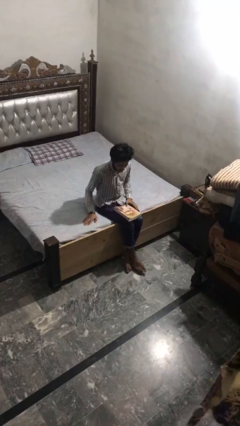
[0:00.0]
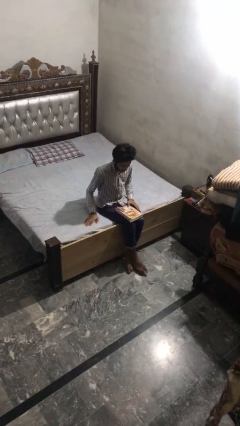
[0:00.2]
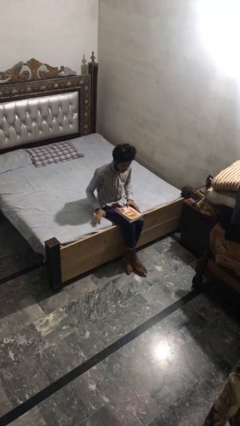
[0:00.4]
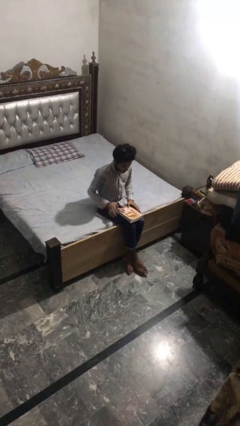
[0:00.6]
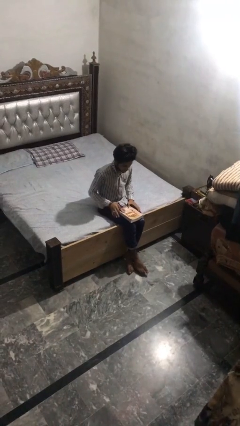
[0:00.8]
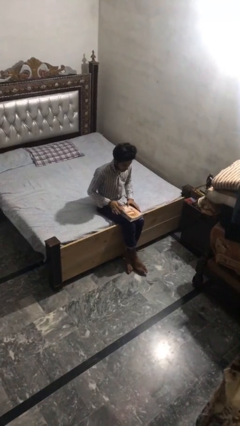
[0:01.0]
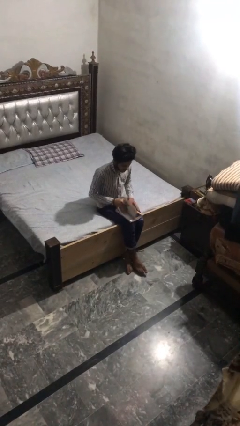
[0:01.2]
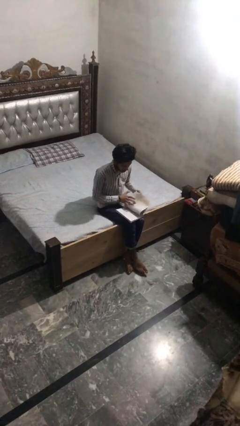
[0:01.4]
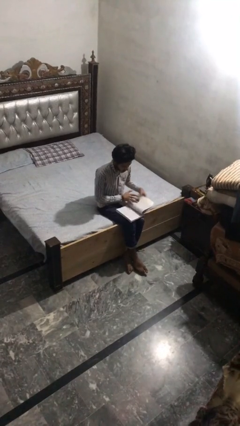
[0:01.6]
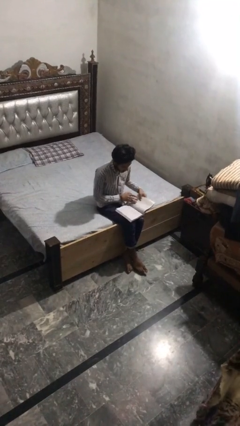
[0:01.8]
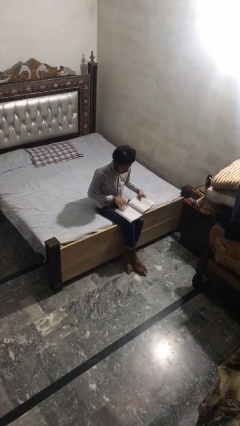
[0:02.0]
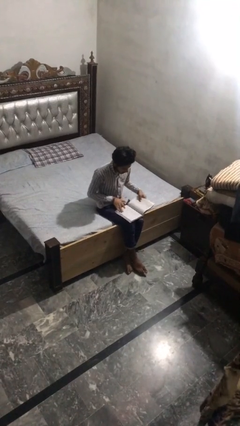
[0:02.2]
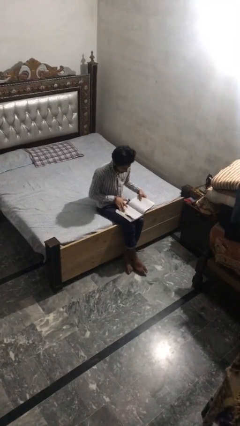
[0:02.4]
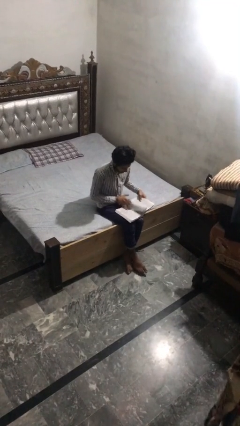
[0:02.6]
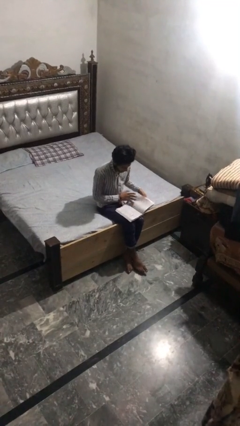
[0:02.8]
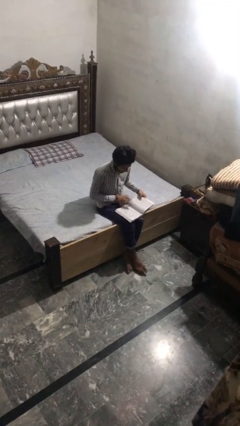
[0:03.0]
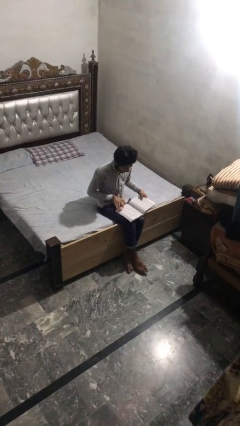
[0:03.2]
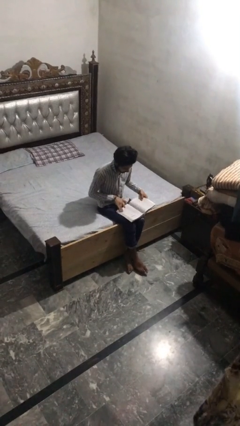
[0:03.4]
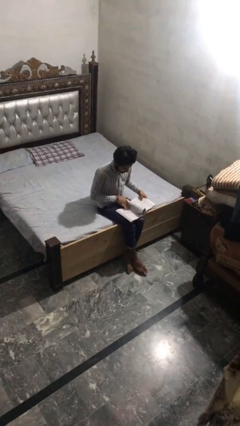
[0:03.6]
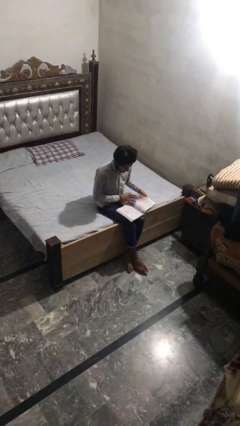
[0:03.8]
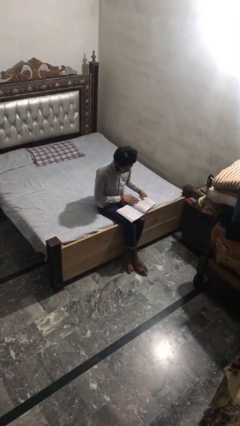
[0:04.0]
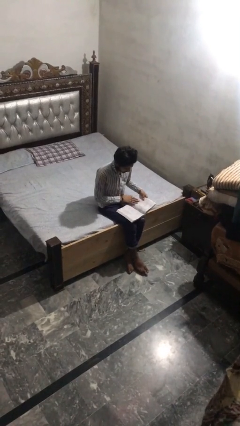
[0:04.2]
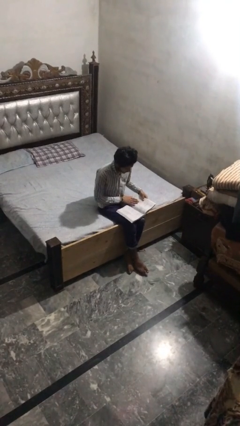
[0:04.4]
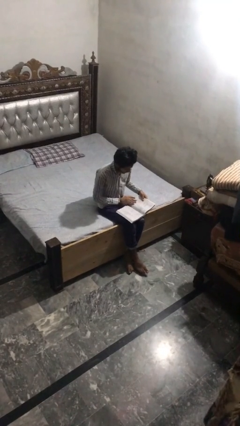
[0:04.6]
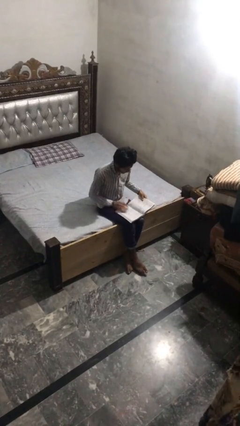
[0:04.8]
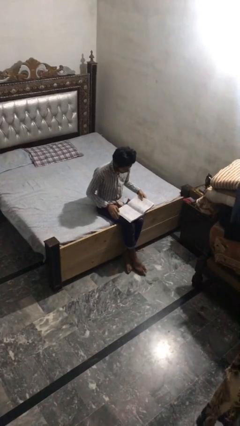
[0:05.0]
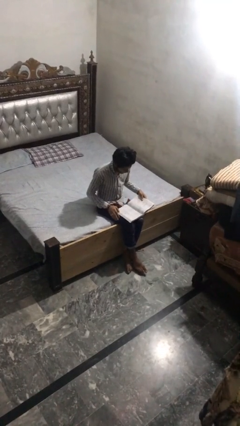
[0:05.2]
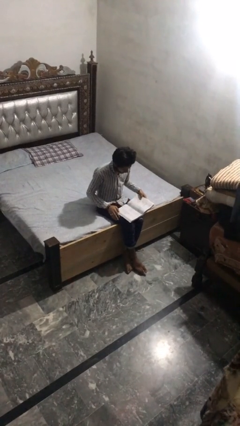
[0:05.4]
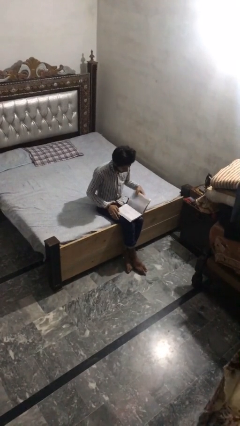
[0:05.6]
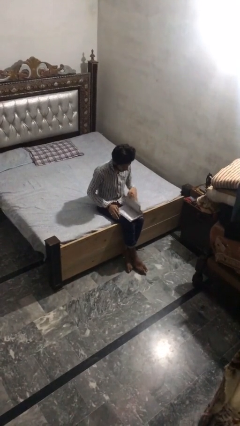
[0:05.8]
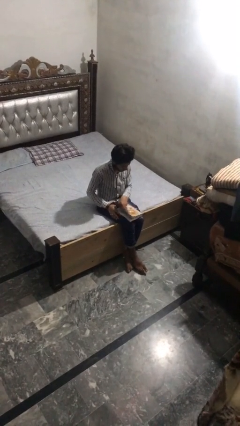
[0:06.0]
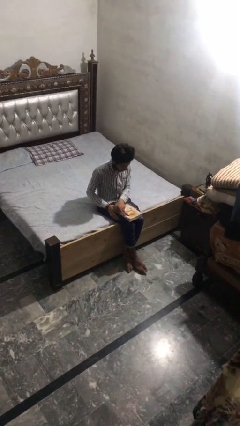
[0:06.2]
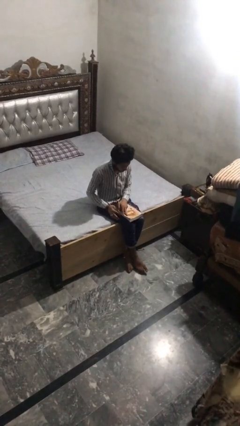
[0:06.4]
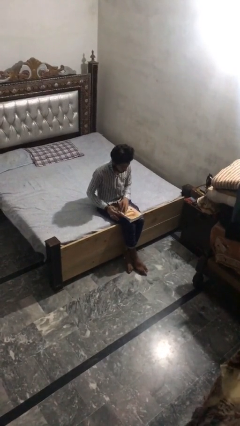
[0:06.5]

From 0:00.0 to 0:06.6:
person reads book

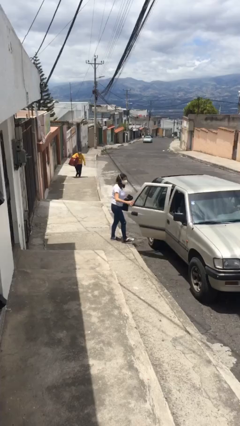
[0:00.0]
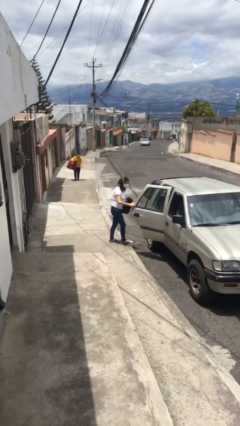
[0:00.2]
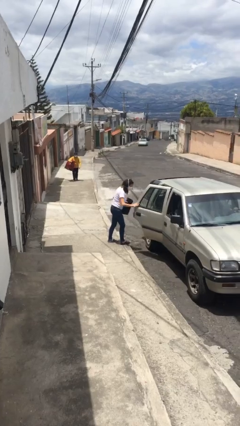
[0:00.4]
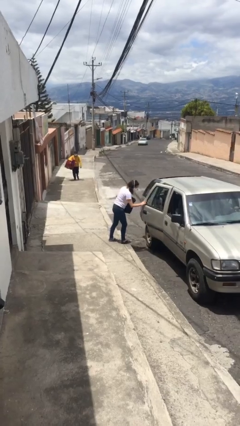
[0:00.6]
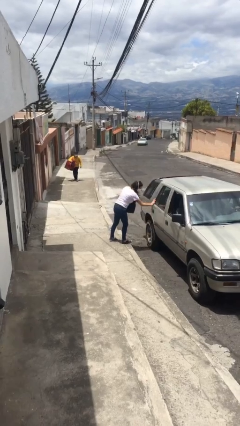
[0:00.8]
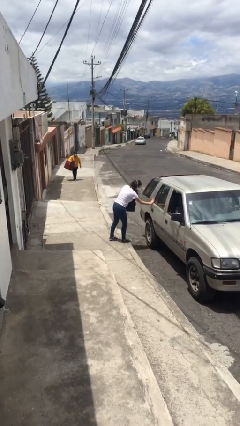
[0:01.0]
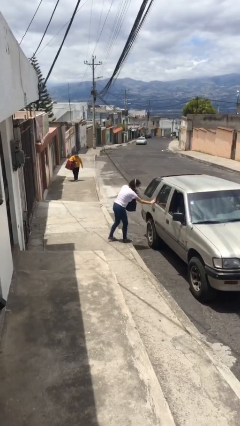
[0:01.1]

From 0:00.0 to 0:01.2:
person closes car door

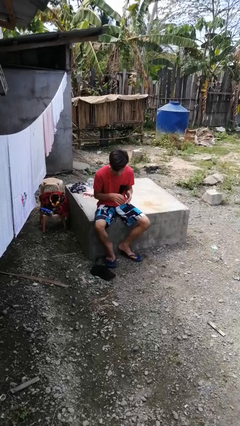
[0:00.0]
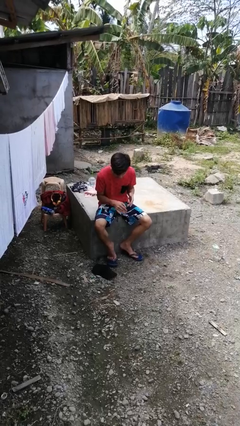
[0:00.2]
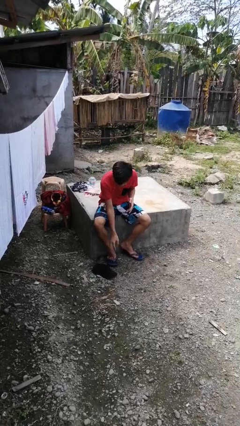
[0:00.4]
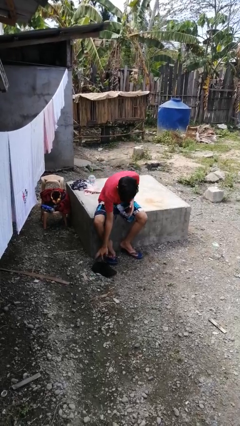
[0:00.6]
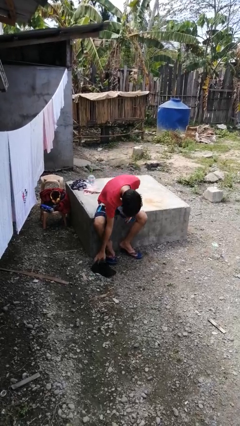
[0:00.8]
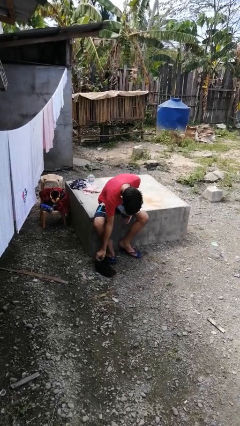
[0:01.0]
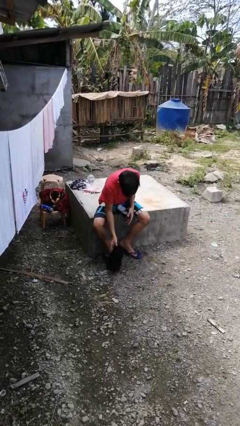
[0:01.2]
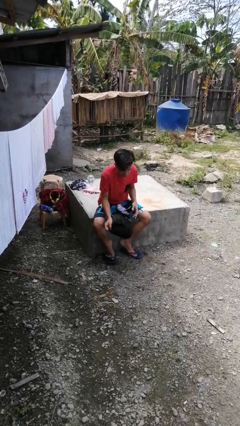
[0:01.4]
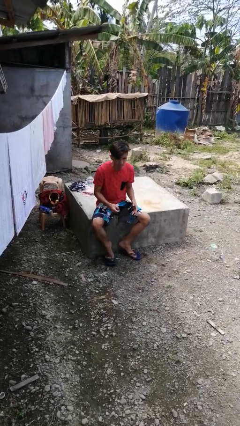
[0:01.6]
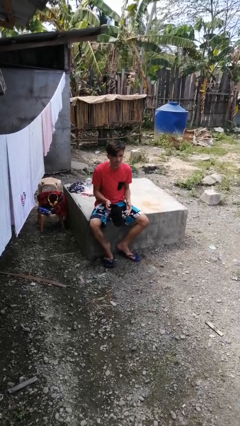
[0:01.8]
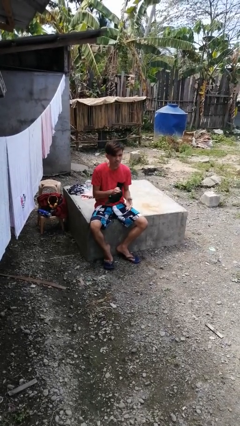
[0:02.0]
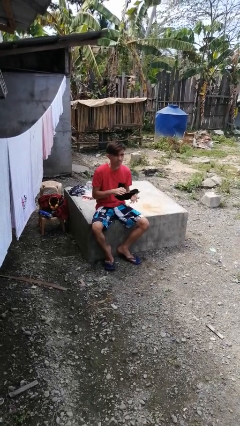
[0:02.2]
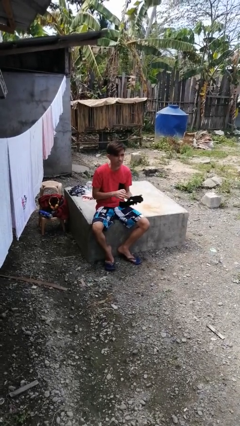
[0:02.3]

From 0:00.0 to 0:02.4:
person picks up object from floor

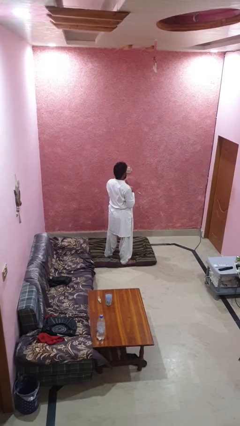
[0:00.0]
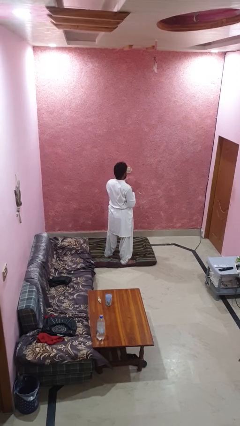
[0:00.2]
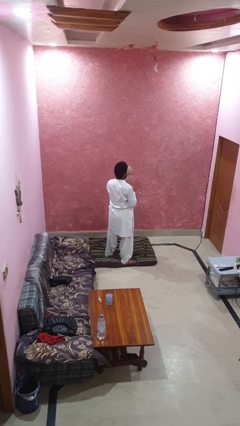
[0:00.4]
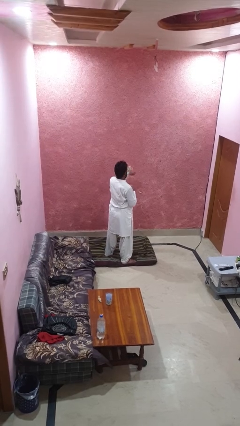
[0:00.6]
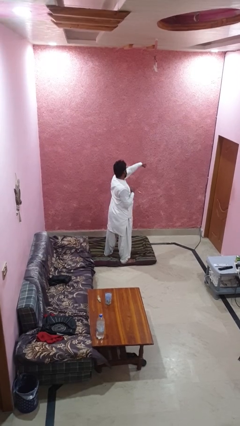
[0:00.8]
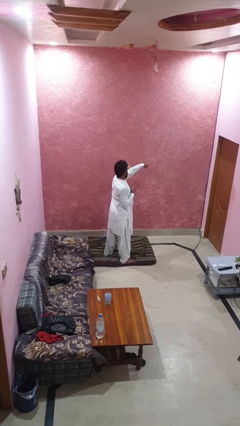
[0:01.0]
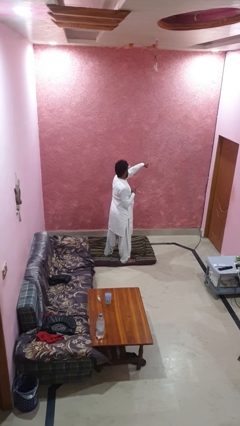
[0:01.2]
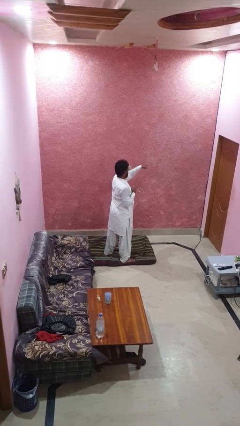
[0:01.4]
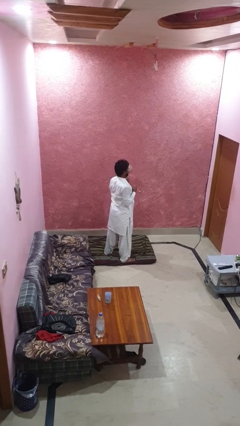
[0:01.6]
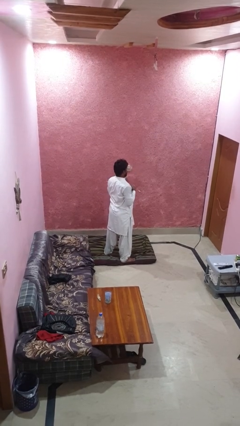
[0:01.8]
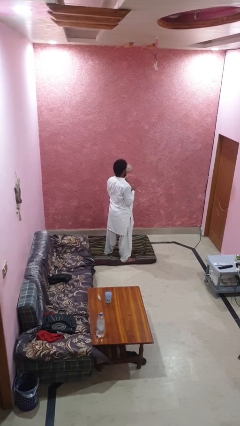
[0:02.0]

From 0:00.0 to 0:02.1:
person punches

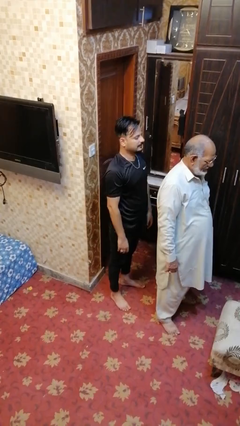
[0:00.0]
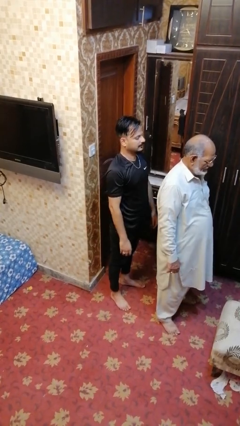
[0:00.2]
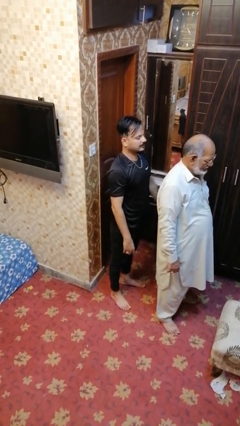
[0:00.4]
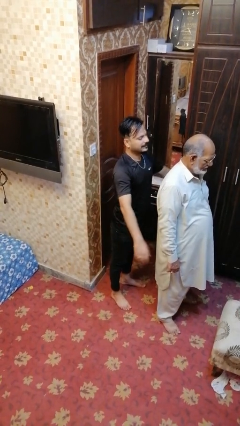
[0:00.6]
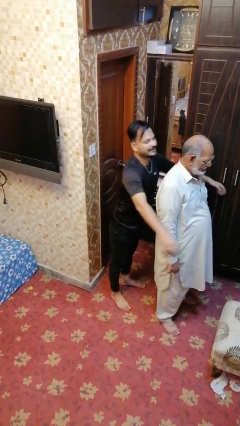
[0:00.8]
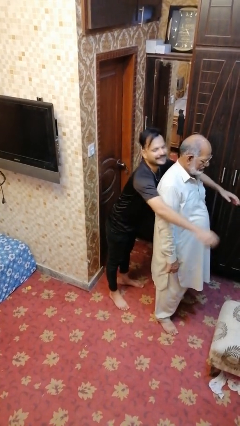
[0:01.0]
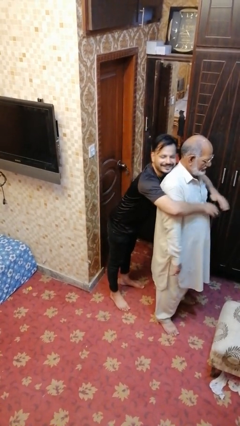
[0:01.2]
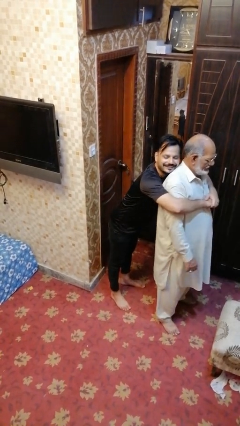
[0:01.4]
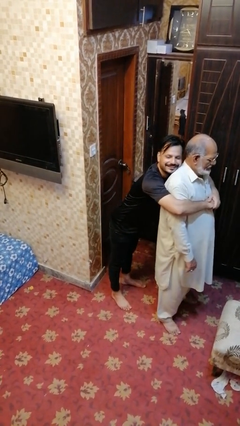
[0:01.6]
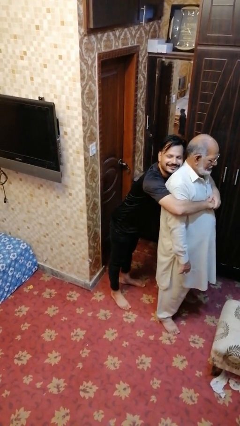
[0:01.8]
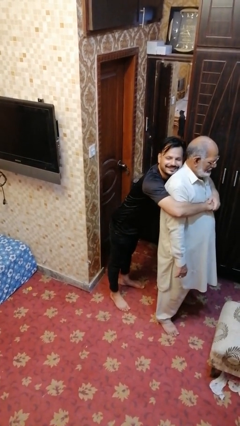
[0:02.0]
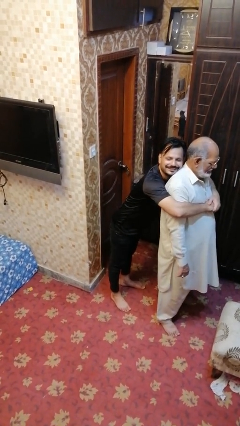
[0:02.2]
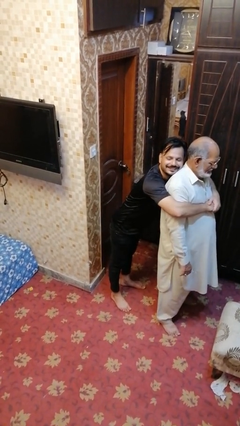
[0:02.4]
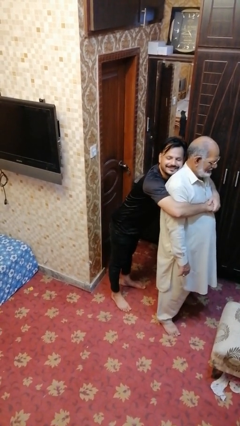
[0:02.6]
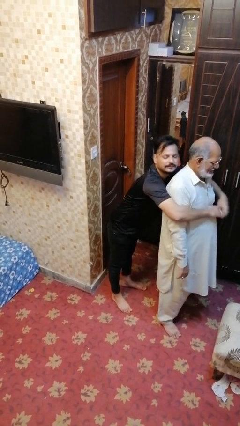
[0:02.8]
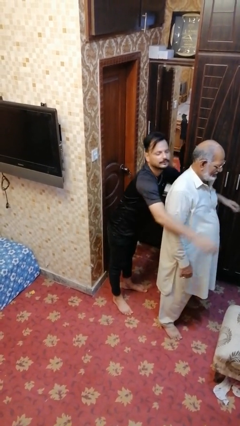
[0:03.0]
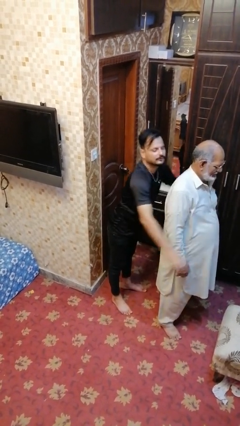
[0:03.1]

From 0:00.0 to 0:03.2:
person hugs person from behind

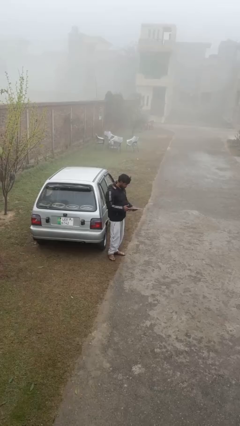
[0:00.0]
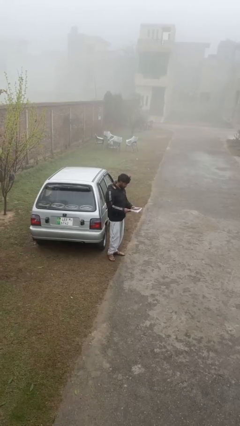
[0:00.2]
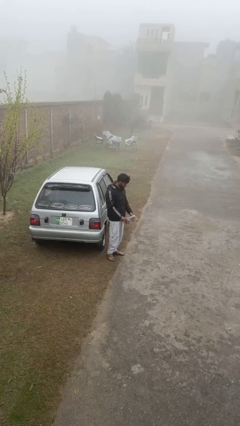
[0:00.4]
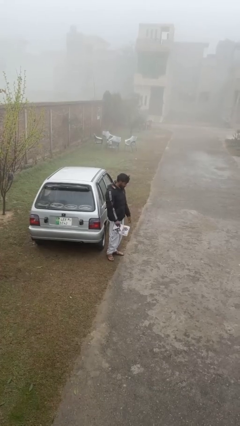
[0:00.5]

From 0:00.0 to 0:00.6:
person reads document

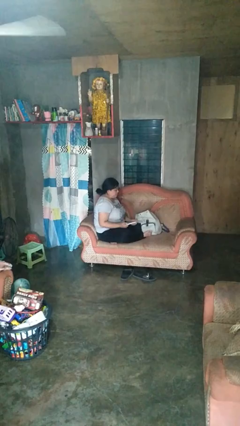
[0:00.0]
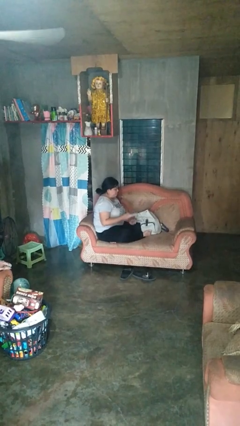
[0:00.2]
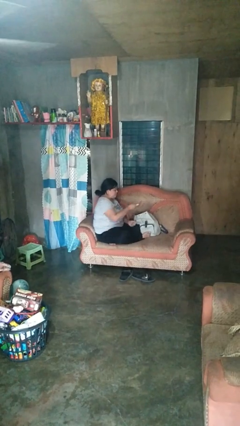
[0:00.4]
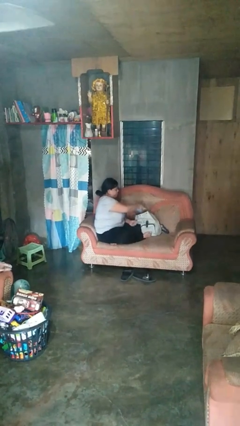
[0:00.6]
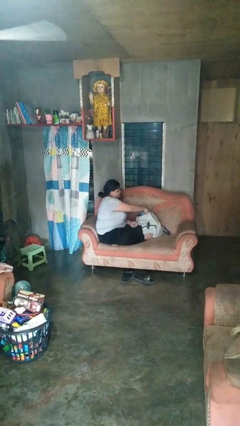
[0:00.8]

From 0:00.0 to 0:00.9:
person puts object into backpack
